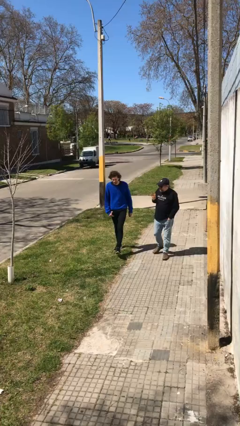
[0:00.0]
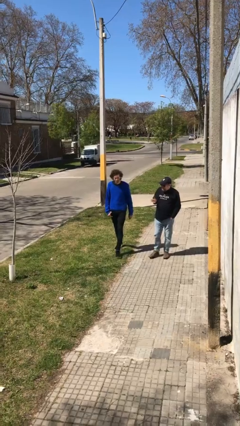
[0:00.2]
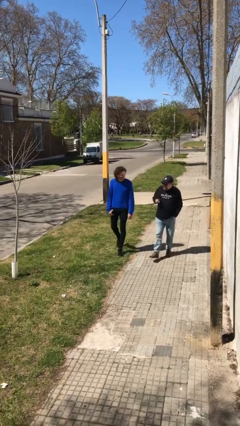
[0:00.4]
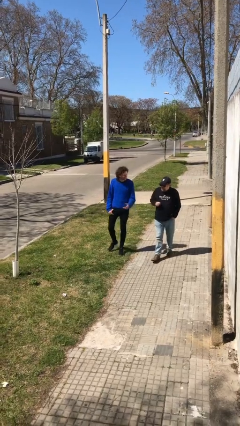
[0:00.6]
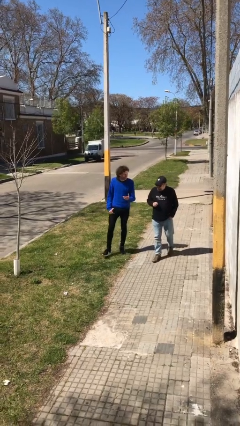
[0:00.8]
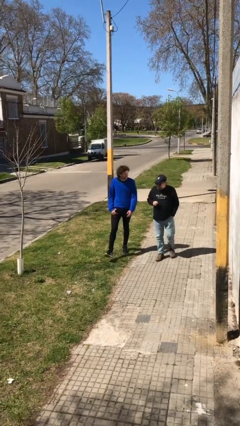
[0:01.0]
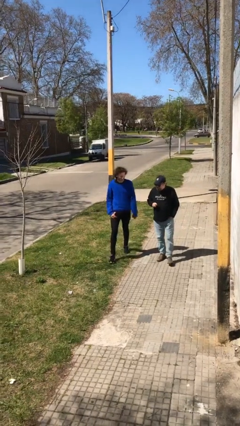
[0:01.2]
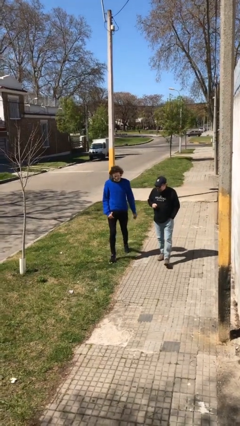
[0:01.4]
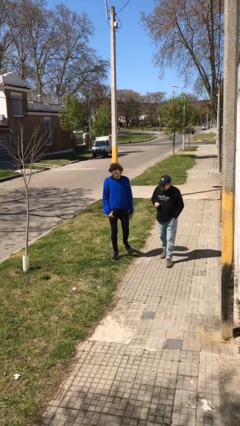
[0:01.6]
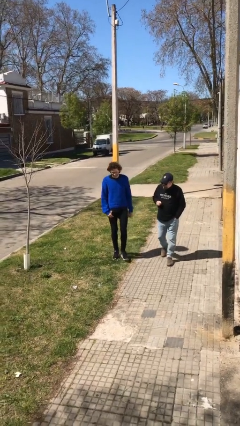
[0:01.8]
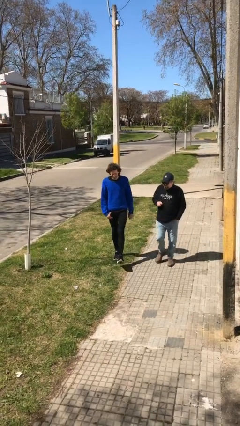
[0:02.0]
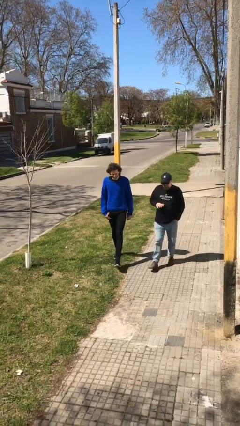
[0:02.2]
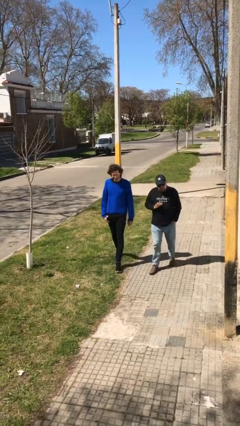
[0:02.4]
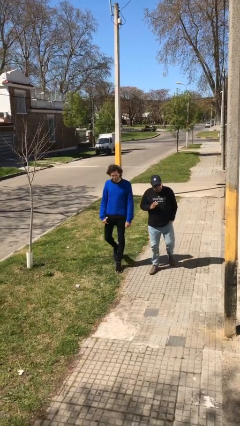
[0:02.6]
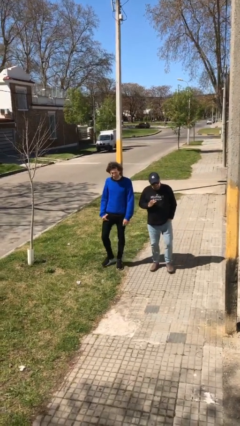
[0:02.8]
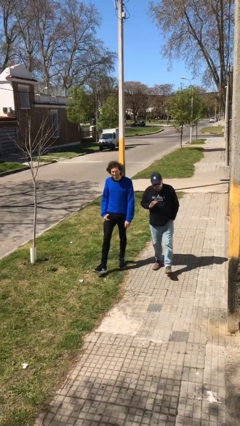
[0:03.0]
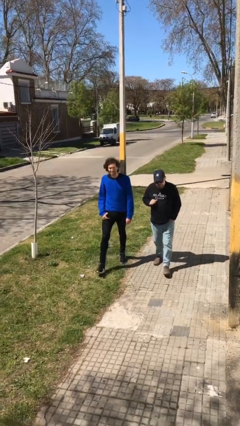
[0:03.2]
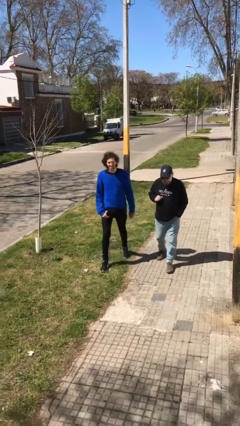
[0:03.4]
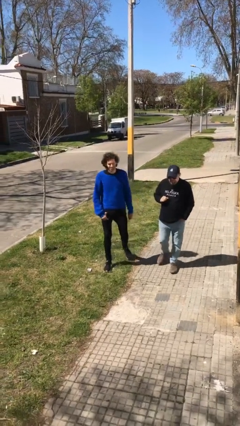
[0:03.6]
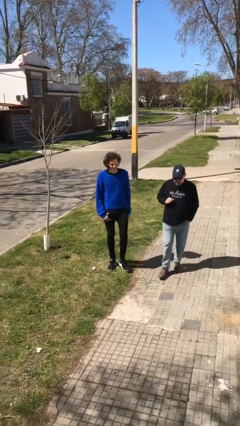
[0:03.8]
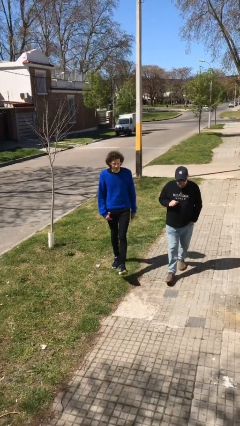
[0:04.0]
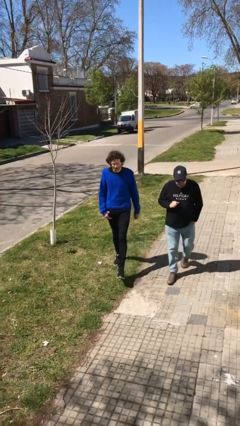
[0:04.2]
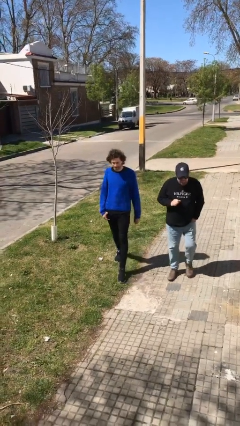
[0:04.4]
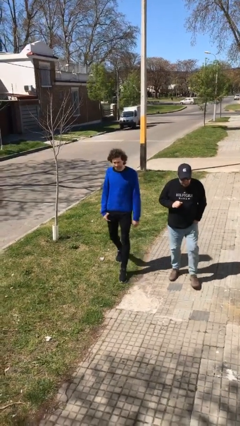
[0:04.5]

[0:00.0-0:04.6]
person talks to person

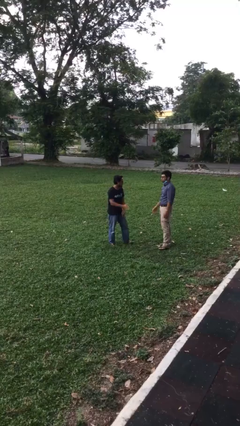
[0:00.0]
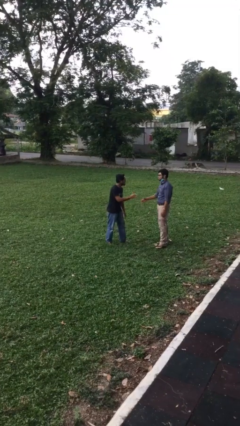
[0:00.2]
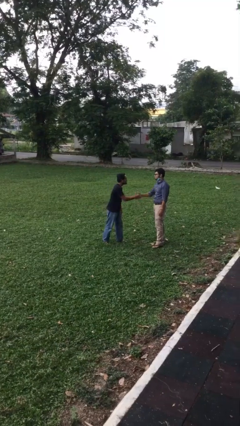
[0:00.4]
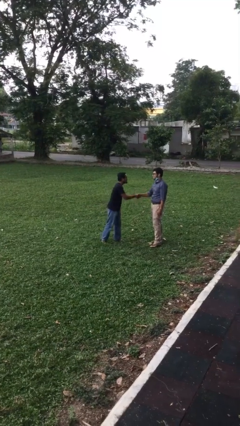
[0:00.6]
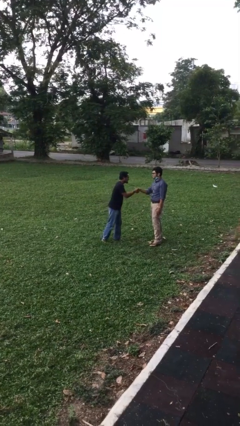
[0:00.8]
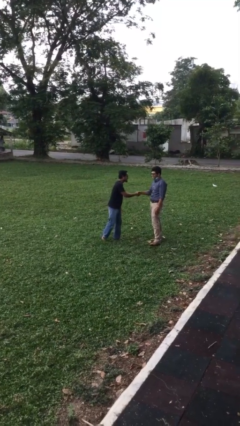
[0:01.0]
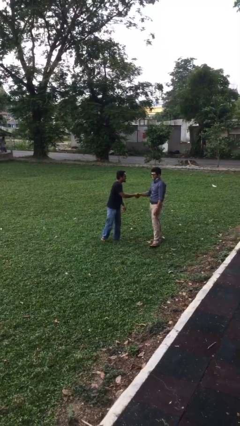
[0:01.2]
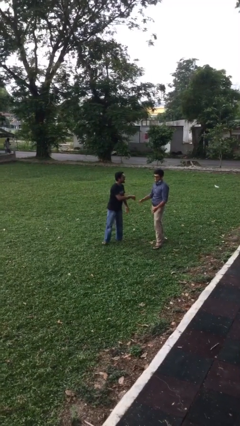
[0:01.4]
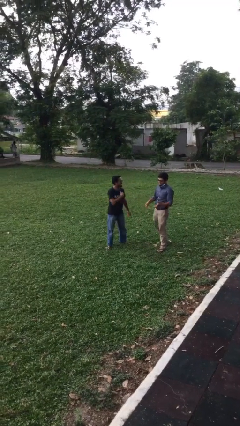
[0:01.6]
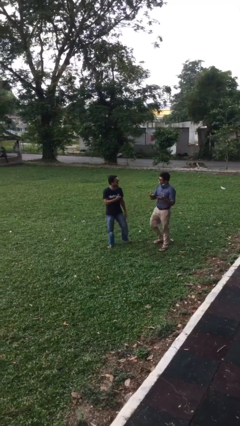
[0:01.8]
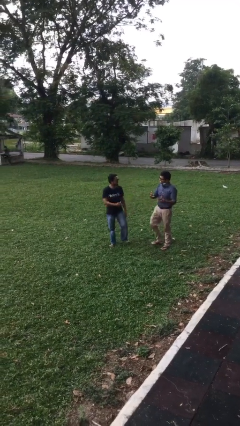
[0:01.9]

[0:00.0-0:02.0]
person shakes hand

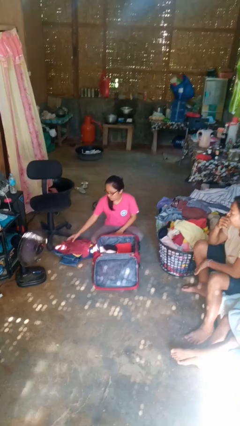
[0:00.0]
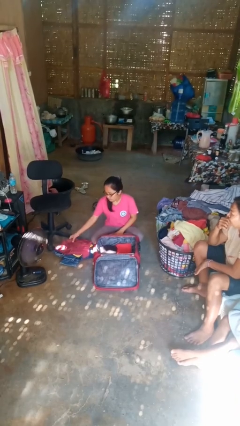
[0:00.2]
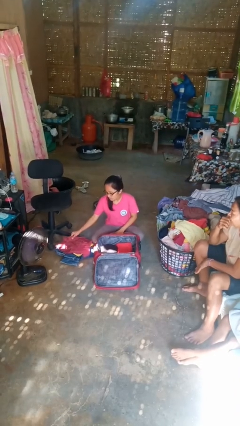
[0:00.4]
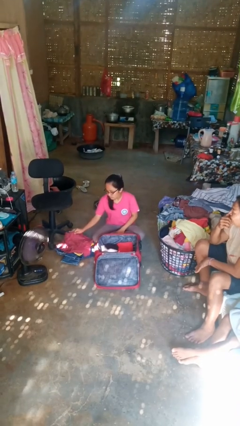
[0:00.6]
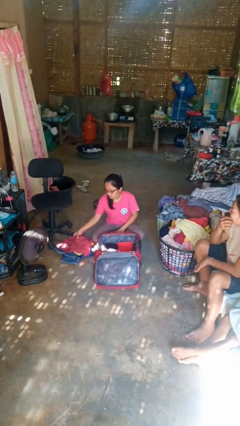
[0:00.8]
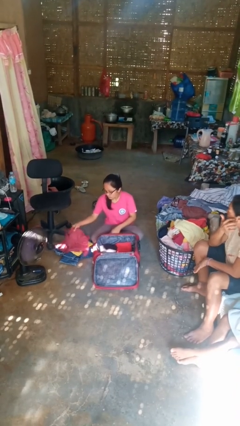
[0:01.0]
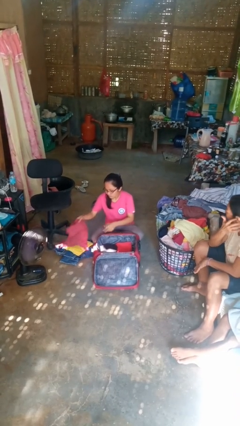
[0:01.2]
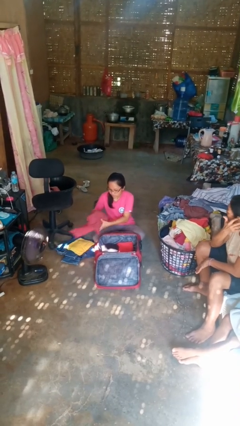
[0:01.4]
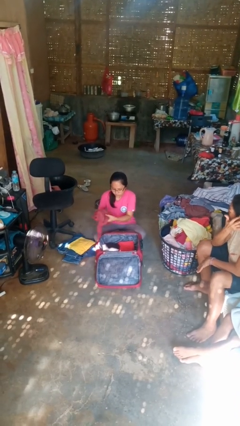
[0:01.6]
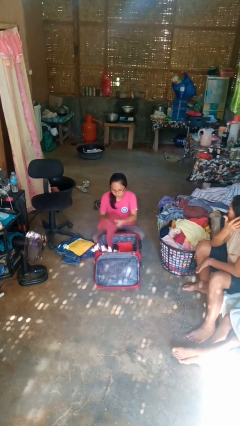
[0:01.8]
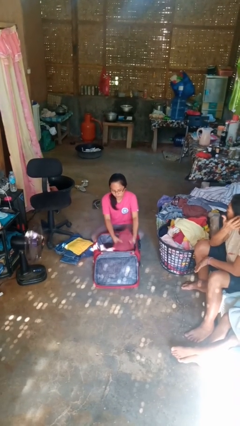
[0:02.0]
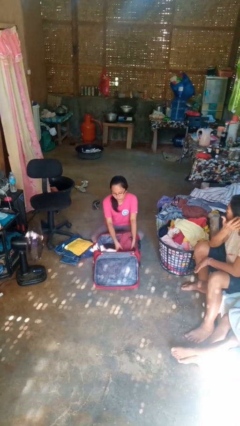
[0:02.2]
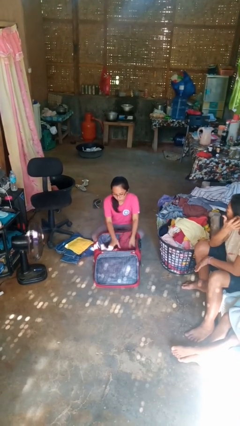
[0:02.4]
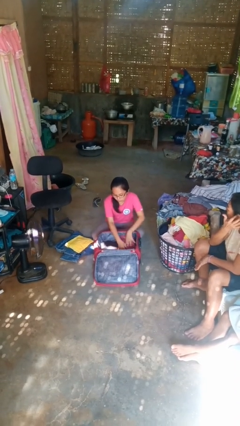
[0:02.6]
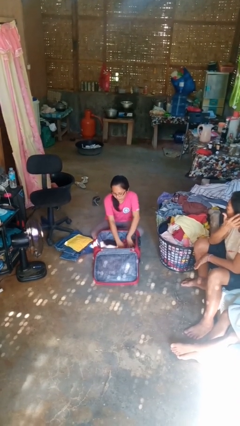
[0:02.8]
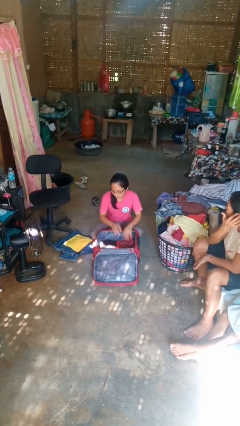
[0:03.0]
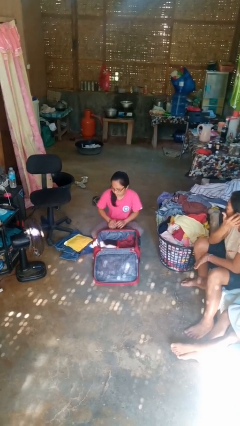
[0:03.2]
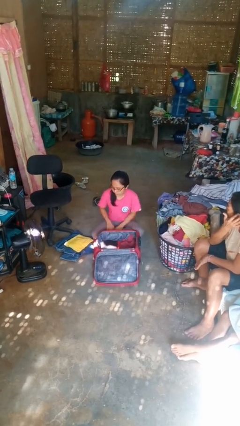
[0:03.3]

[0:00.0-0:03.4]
person loads clothes into suitcase

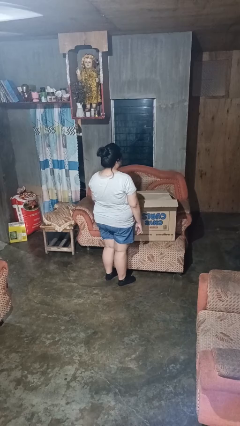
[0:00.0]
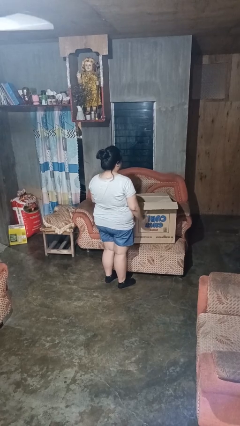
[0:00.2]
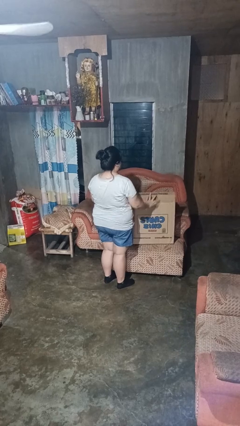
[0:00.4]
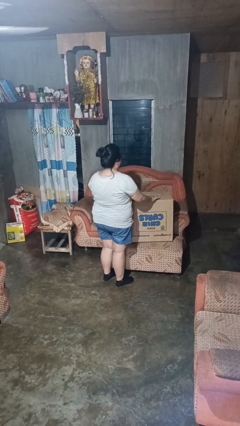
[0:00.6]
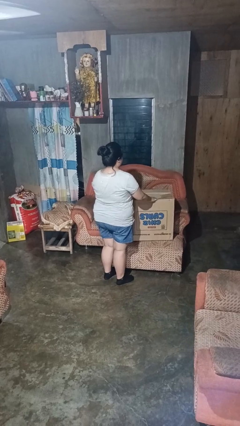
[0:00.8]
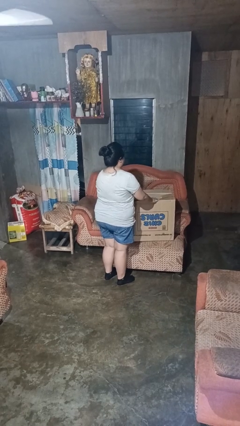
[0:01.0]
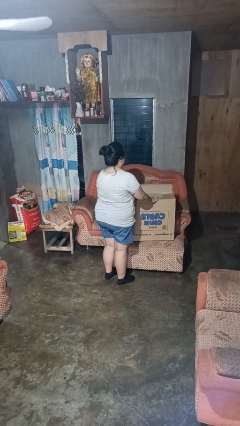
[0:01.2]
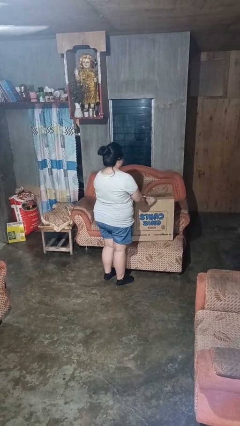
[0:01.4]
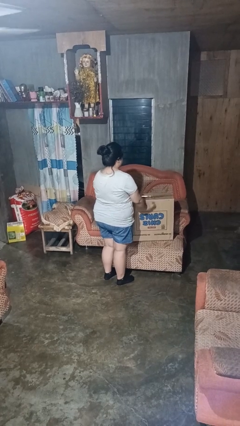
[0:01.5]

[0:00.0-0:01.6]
person closes box

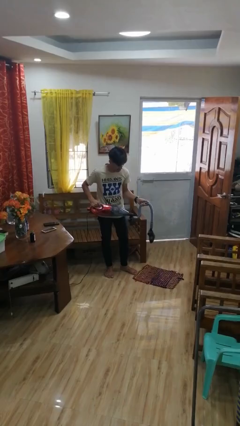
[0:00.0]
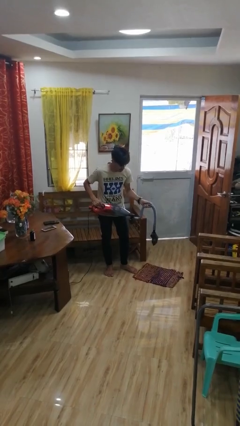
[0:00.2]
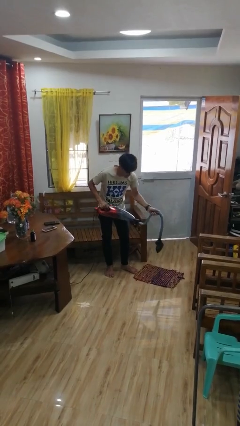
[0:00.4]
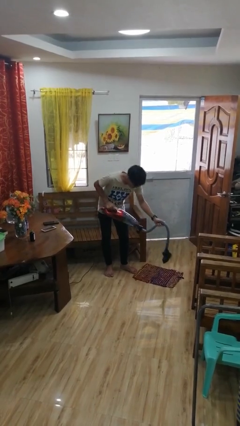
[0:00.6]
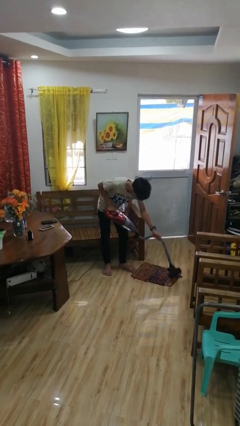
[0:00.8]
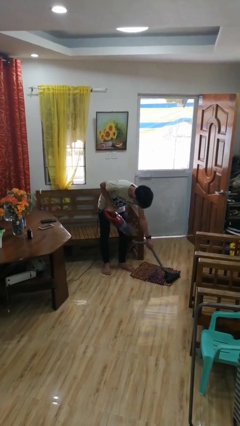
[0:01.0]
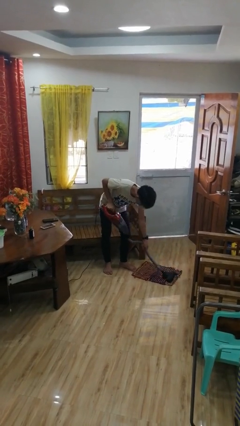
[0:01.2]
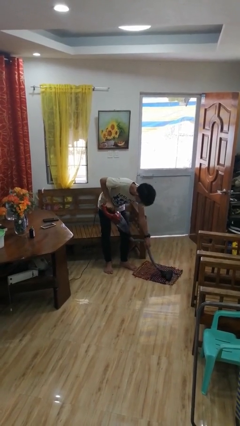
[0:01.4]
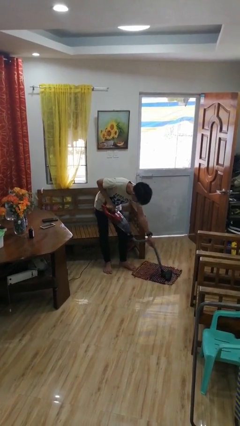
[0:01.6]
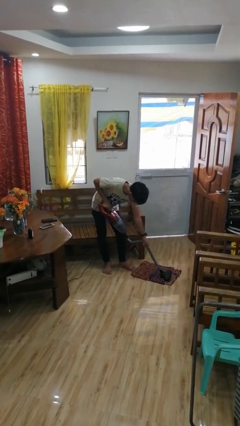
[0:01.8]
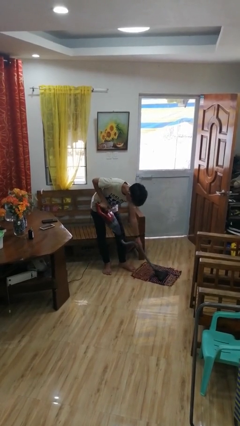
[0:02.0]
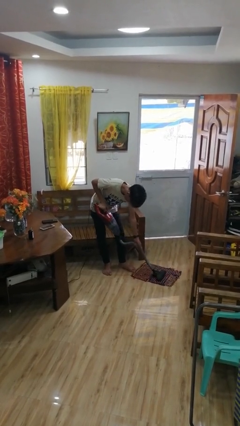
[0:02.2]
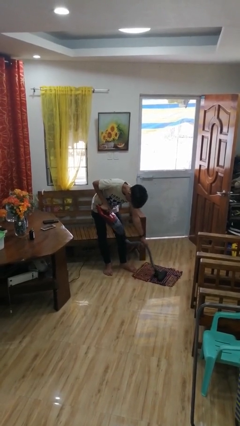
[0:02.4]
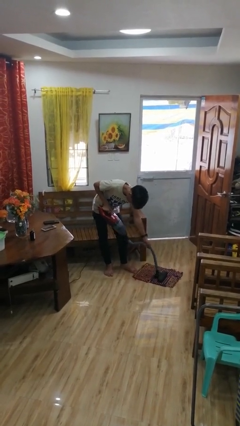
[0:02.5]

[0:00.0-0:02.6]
person vacuums carpet

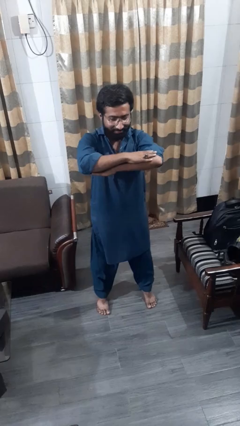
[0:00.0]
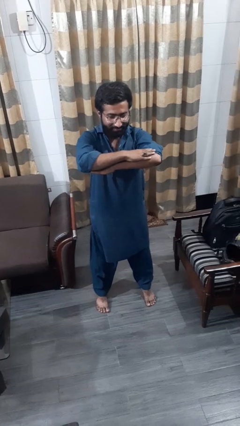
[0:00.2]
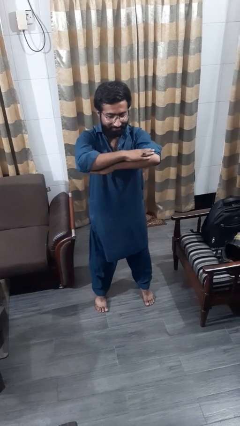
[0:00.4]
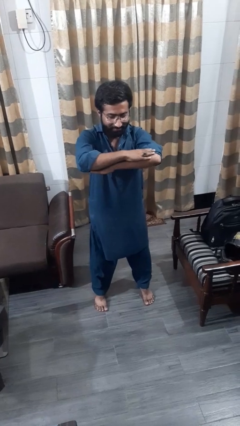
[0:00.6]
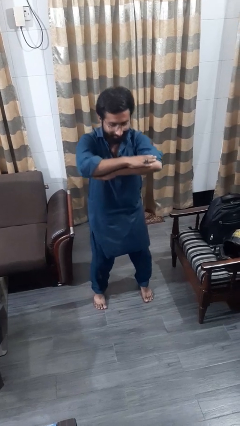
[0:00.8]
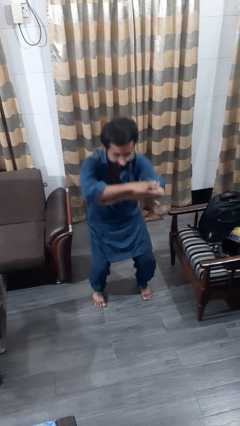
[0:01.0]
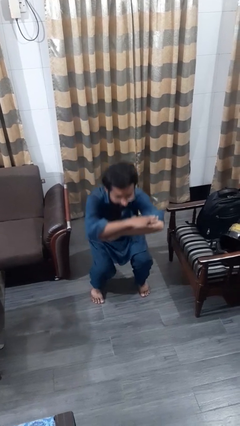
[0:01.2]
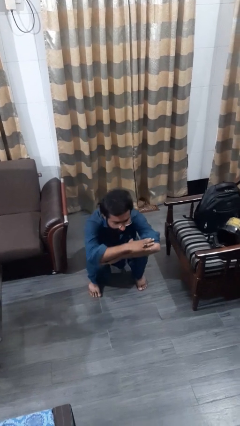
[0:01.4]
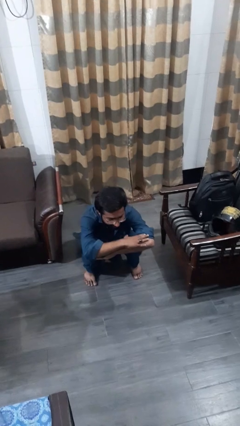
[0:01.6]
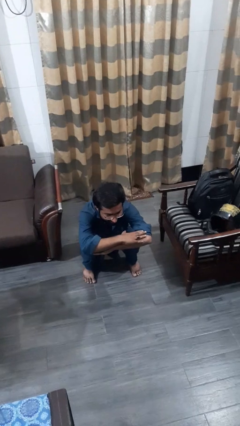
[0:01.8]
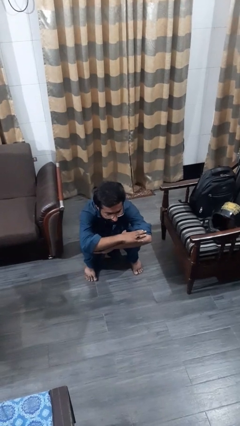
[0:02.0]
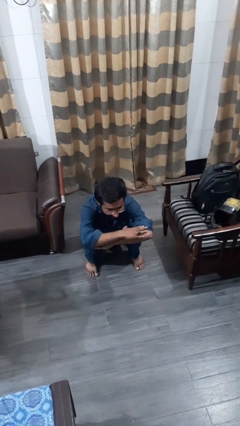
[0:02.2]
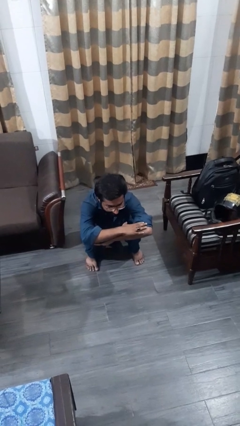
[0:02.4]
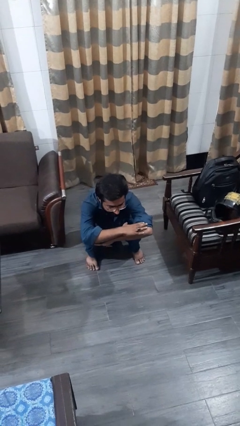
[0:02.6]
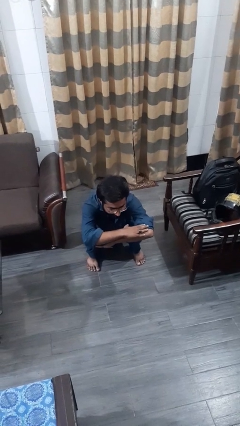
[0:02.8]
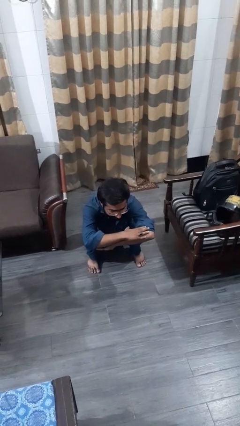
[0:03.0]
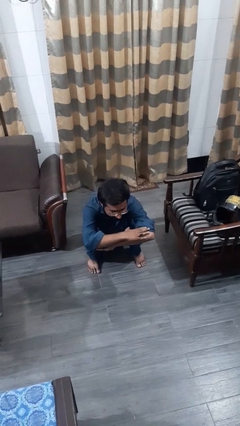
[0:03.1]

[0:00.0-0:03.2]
person squats

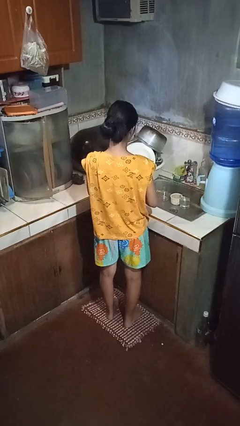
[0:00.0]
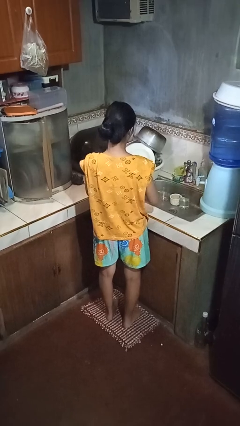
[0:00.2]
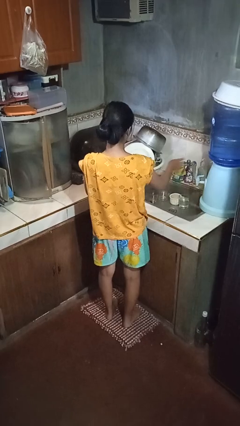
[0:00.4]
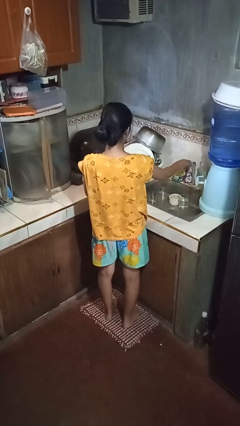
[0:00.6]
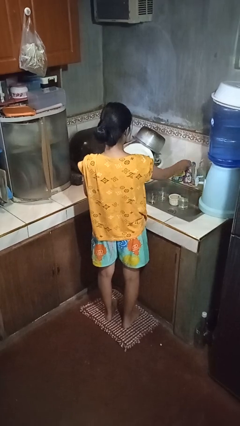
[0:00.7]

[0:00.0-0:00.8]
person turns on faucet
